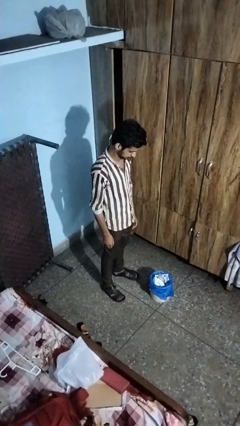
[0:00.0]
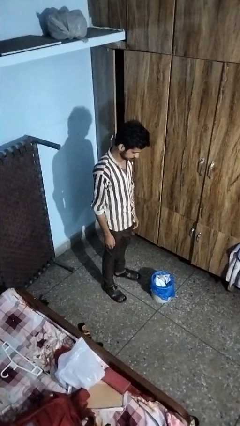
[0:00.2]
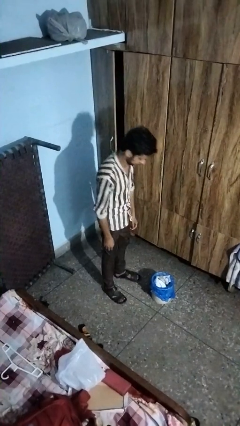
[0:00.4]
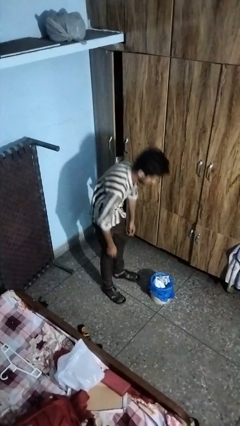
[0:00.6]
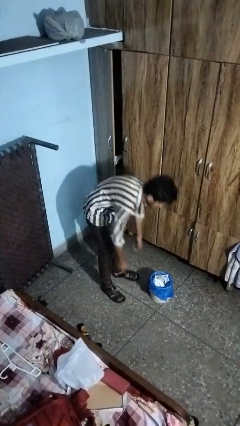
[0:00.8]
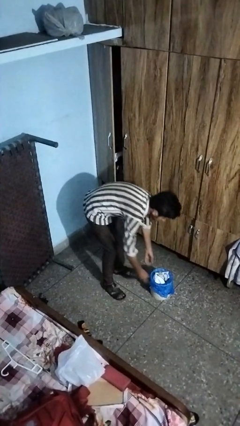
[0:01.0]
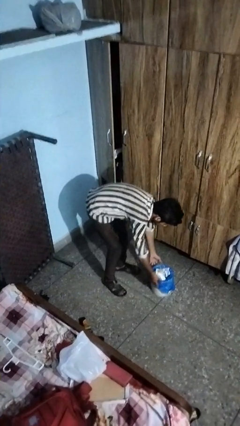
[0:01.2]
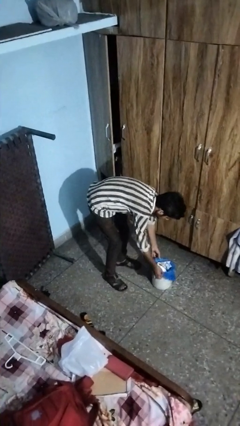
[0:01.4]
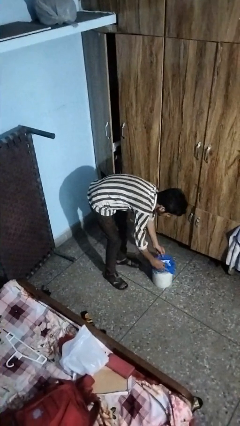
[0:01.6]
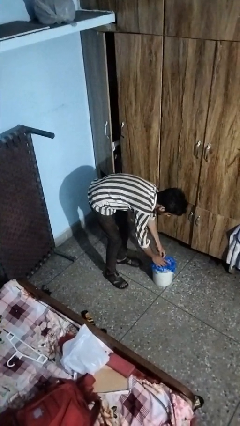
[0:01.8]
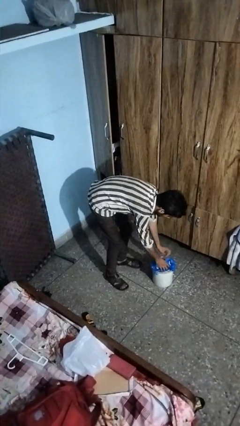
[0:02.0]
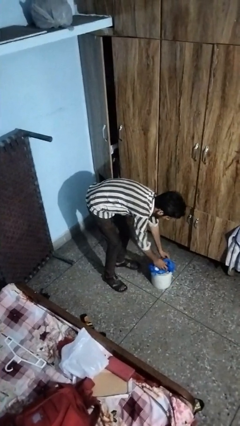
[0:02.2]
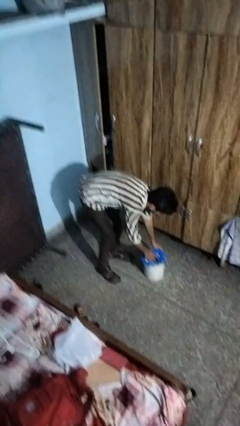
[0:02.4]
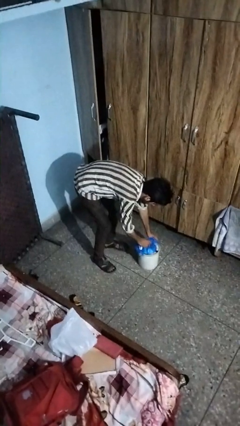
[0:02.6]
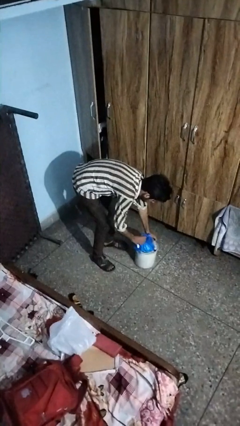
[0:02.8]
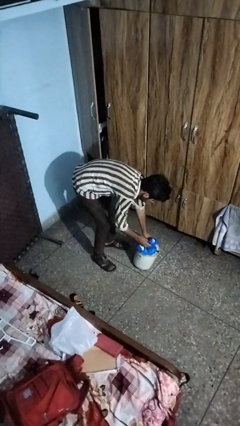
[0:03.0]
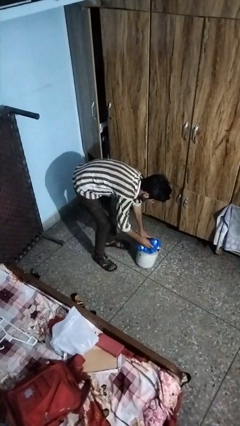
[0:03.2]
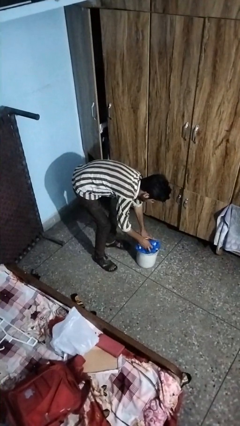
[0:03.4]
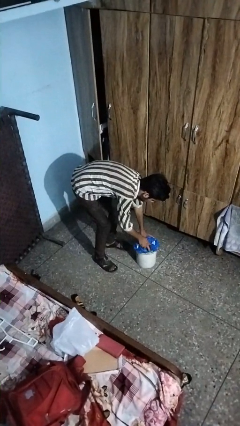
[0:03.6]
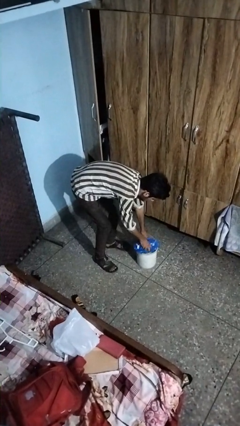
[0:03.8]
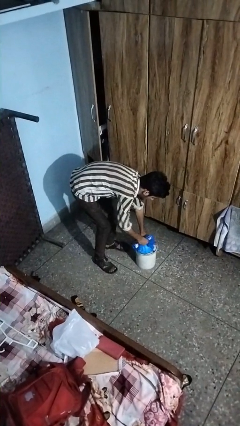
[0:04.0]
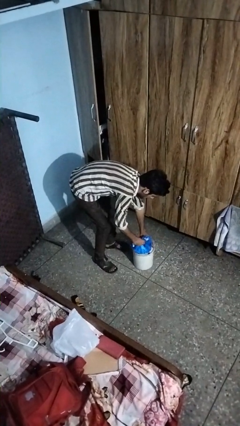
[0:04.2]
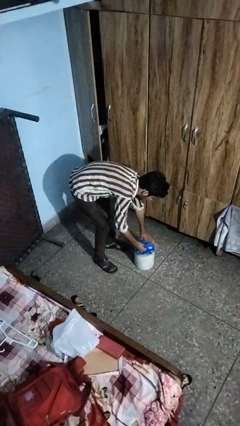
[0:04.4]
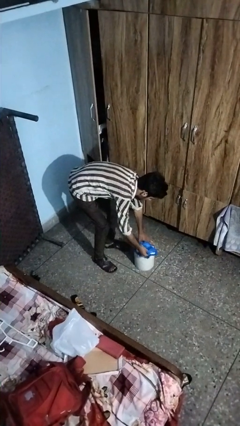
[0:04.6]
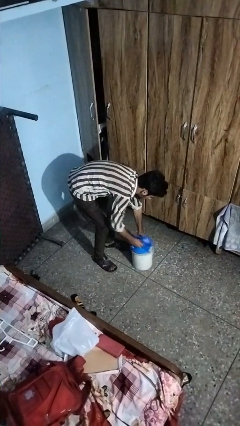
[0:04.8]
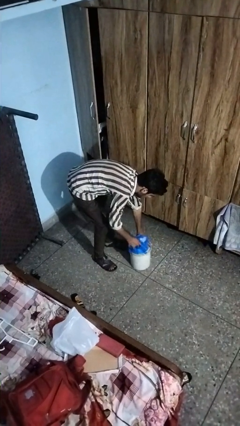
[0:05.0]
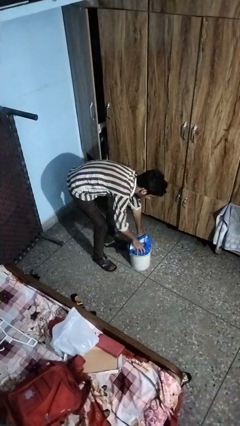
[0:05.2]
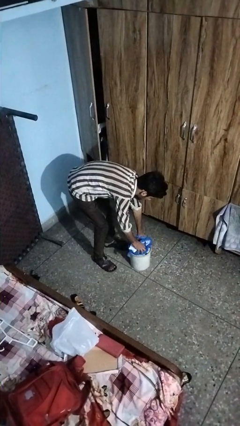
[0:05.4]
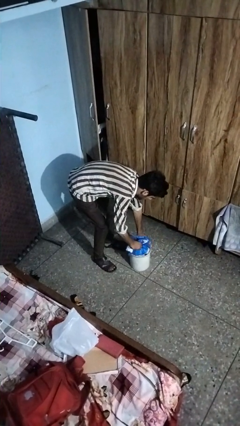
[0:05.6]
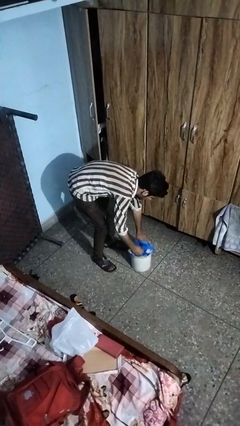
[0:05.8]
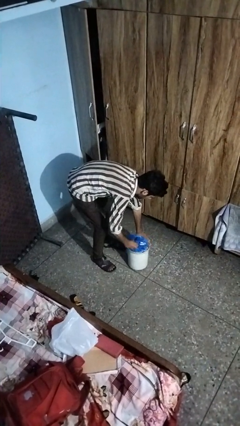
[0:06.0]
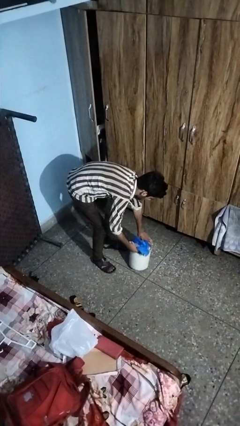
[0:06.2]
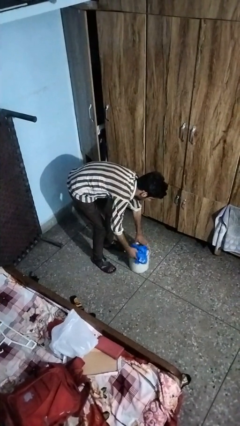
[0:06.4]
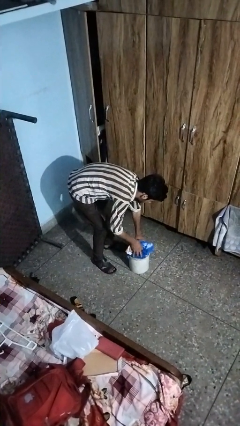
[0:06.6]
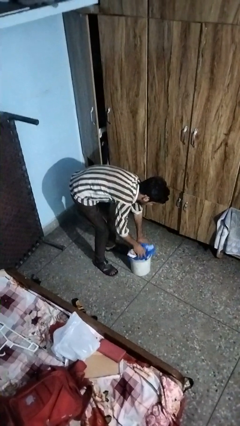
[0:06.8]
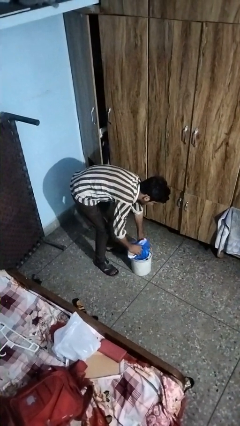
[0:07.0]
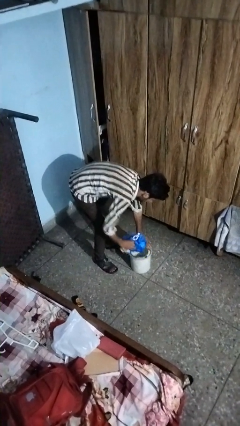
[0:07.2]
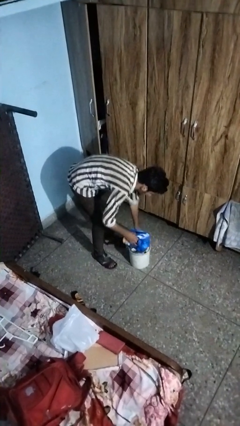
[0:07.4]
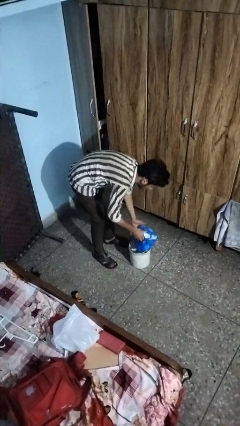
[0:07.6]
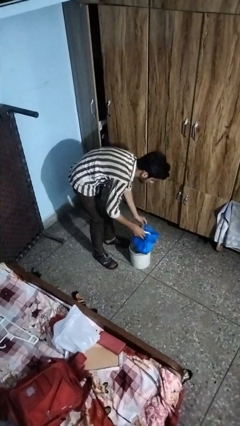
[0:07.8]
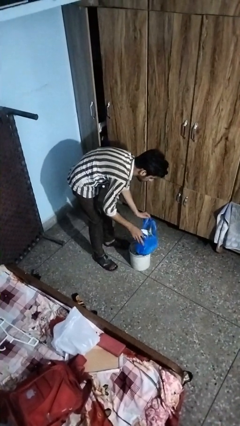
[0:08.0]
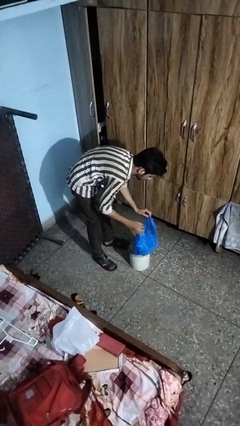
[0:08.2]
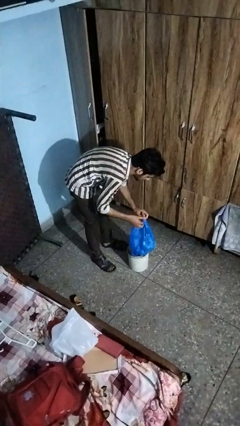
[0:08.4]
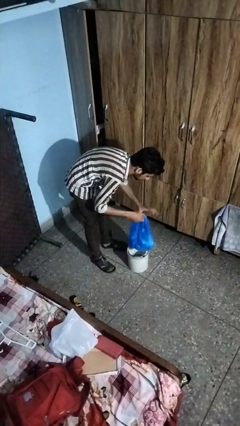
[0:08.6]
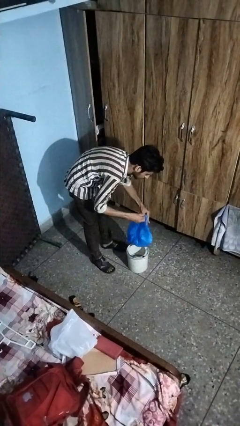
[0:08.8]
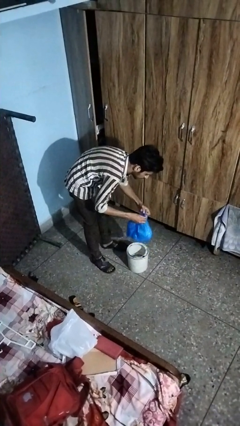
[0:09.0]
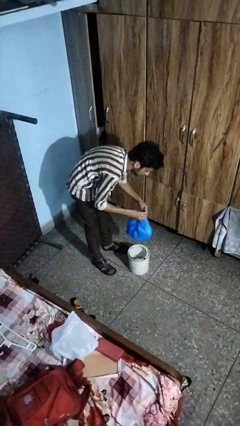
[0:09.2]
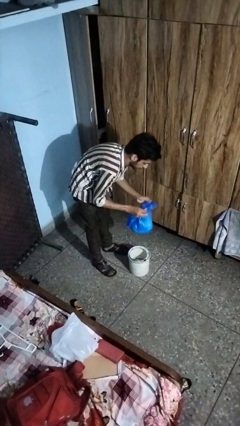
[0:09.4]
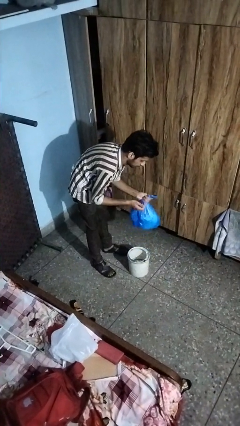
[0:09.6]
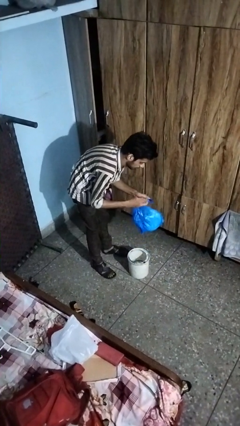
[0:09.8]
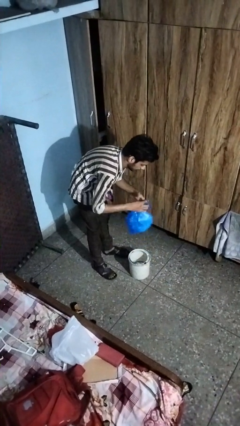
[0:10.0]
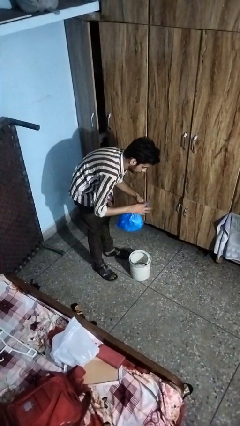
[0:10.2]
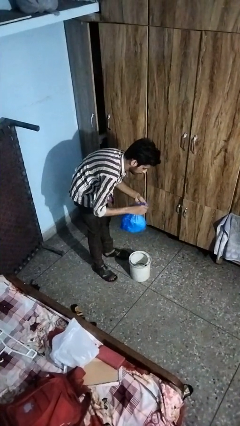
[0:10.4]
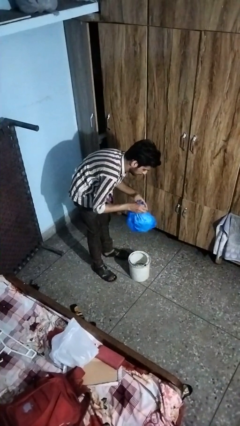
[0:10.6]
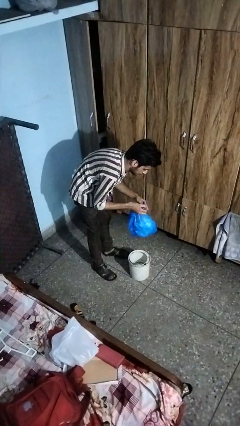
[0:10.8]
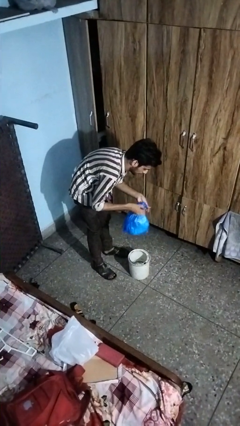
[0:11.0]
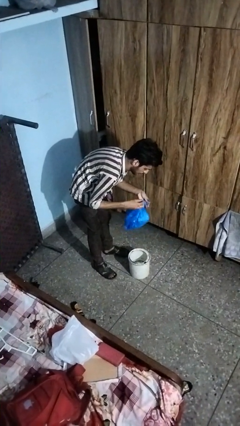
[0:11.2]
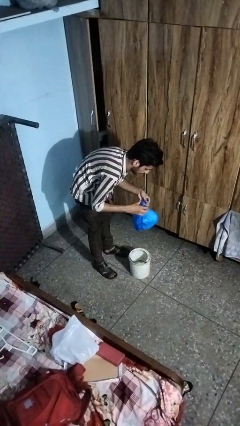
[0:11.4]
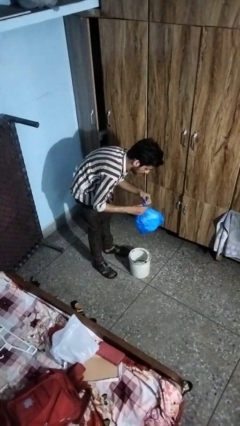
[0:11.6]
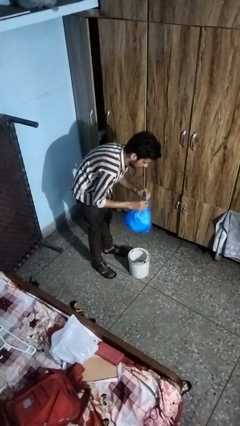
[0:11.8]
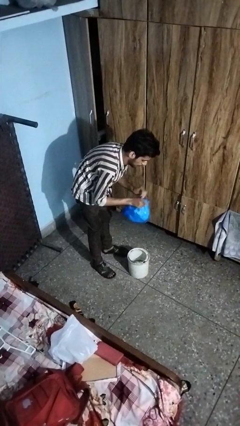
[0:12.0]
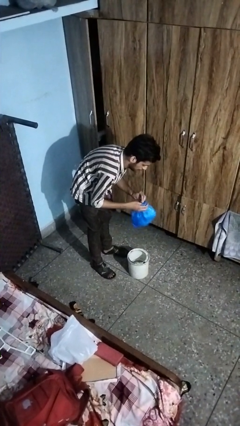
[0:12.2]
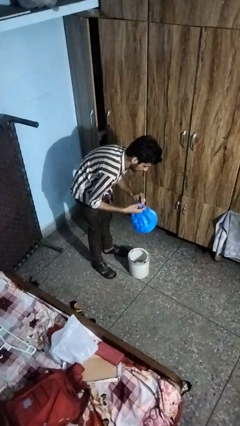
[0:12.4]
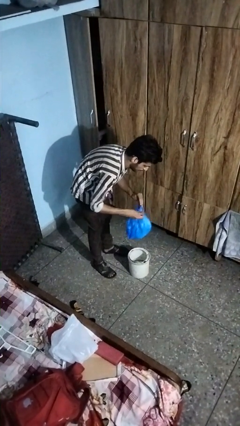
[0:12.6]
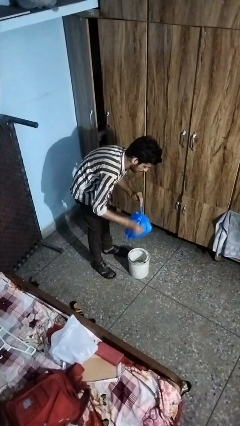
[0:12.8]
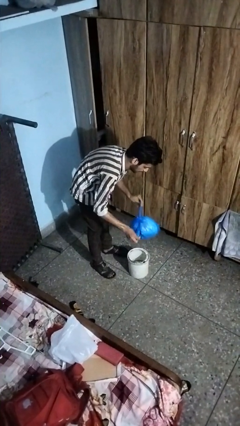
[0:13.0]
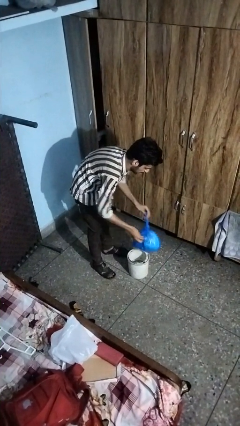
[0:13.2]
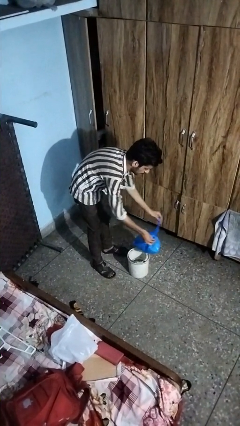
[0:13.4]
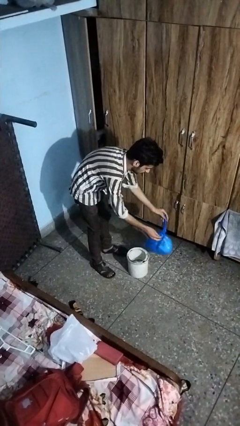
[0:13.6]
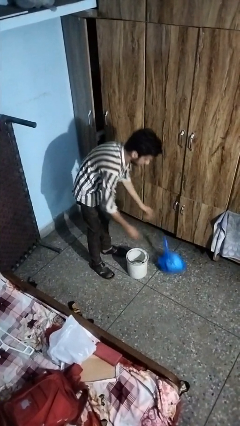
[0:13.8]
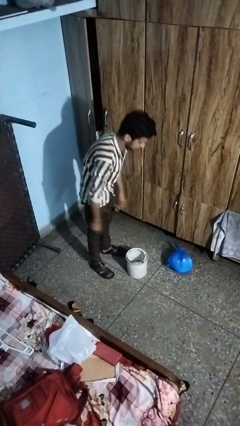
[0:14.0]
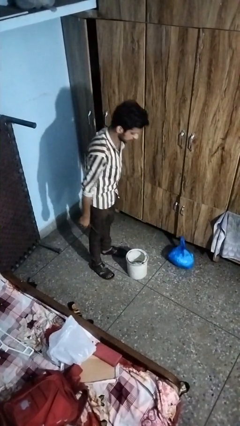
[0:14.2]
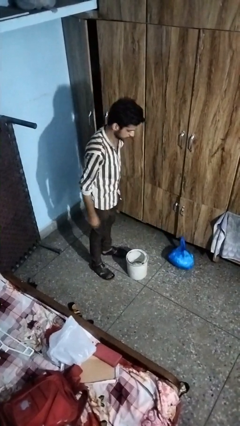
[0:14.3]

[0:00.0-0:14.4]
person removes trashbag from trashcan

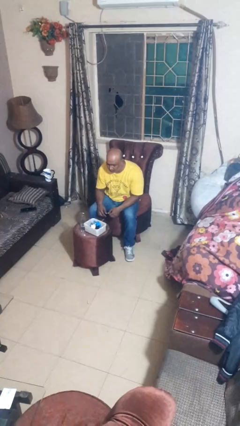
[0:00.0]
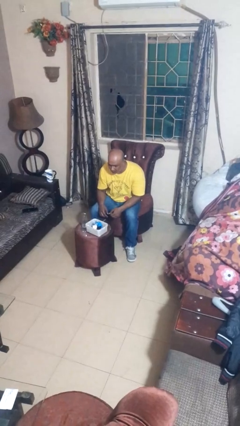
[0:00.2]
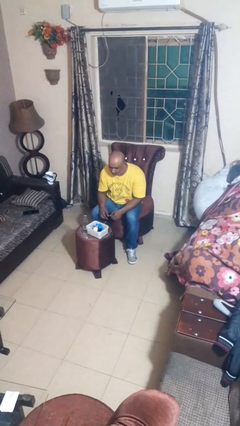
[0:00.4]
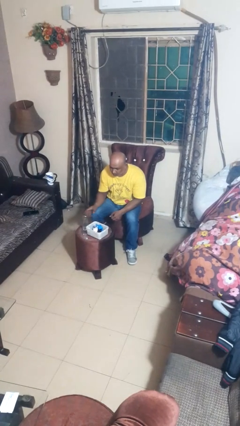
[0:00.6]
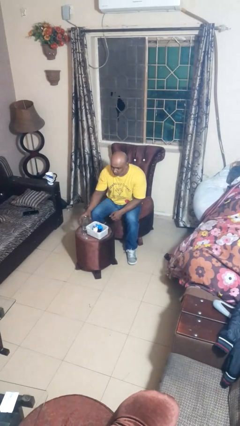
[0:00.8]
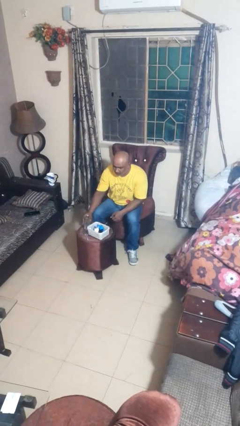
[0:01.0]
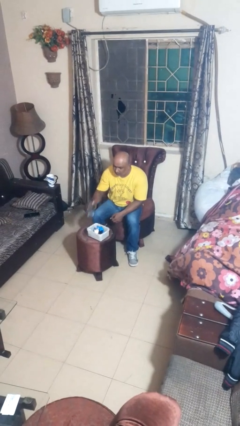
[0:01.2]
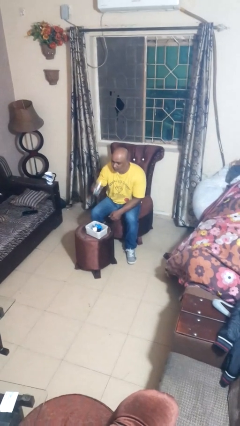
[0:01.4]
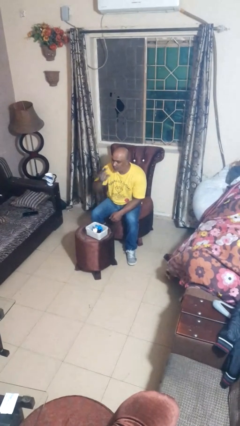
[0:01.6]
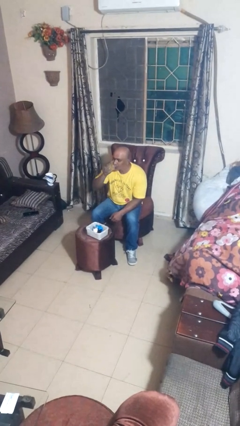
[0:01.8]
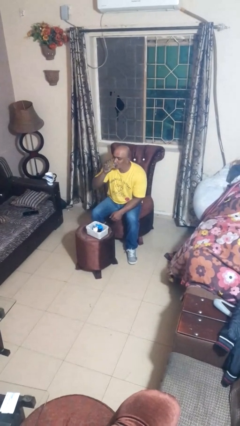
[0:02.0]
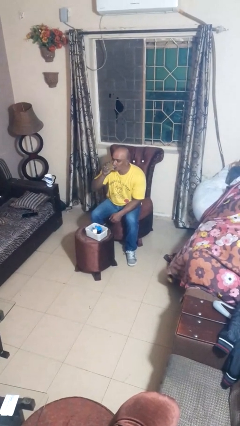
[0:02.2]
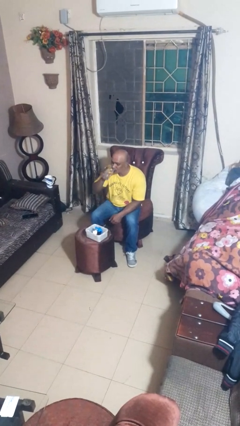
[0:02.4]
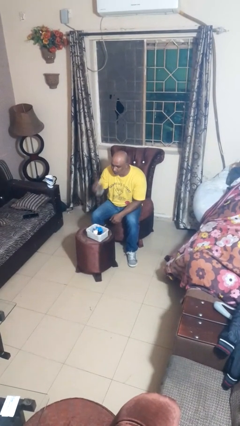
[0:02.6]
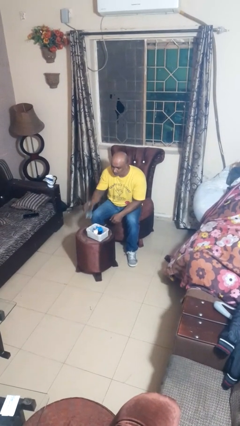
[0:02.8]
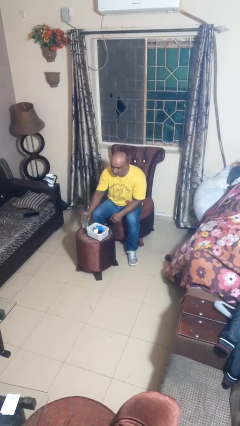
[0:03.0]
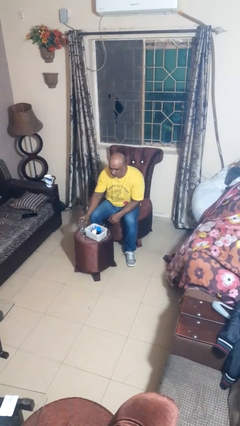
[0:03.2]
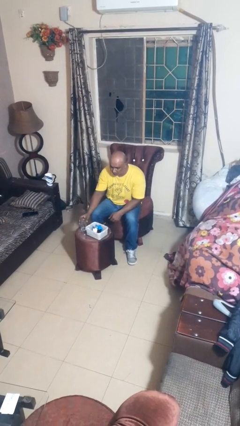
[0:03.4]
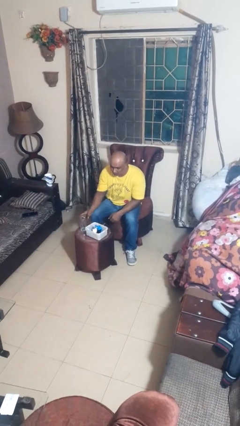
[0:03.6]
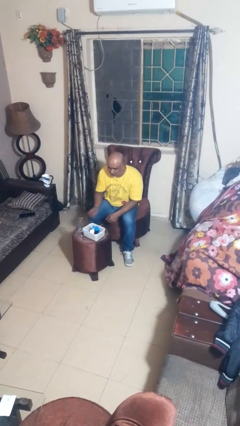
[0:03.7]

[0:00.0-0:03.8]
person drinks from cup
